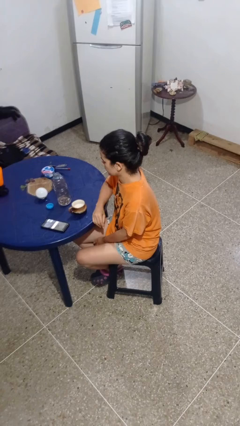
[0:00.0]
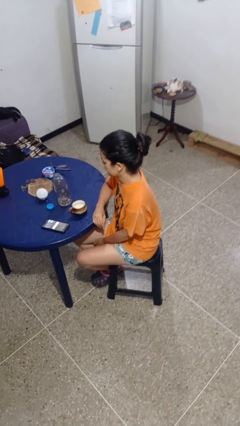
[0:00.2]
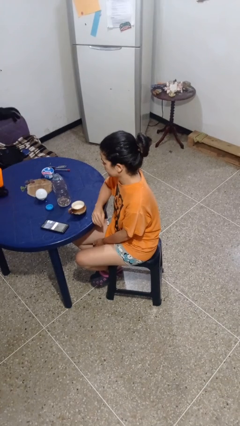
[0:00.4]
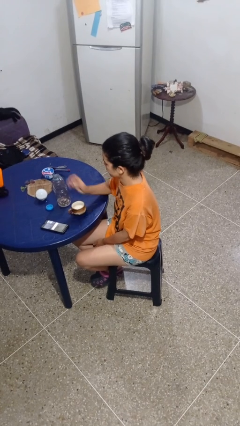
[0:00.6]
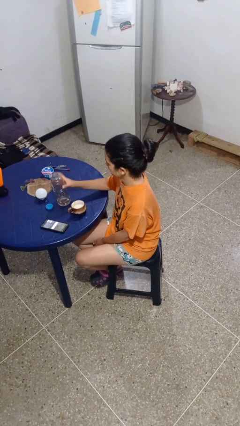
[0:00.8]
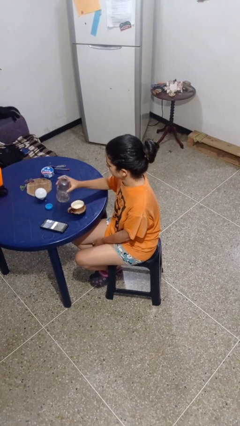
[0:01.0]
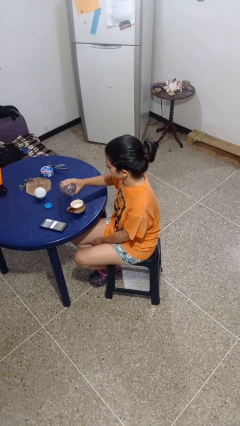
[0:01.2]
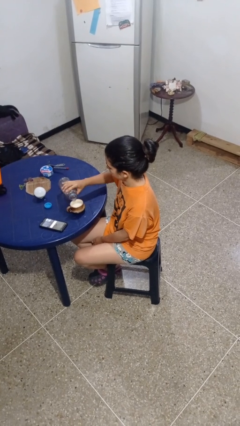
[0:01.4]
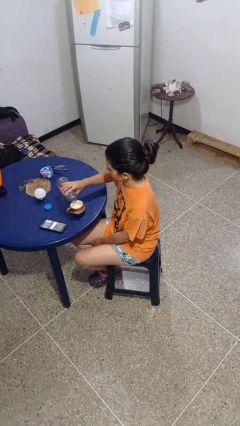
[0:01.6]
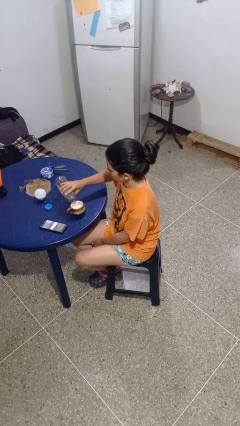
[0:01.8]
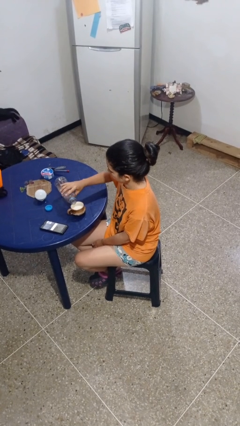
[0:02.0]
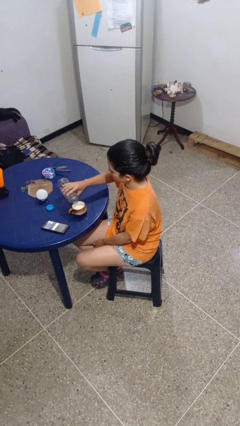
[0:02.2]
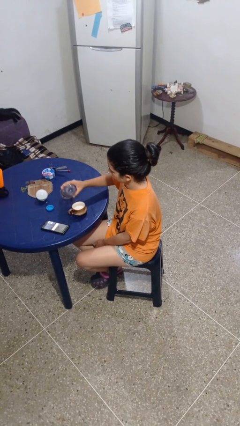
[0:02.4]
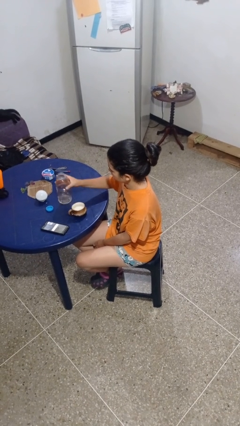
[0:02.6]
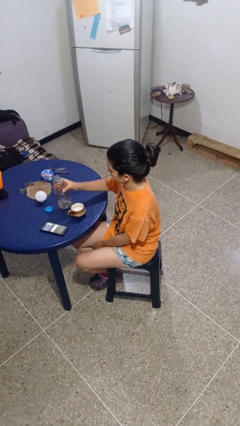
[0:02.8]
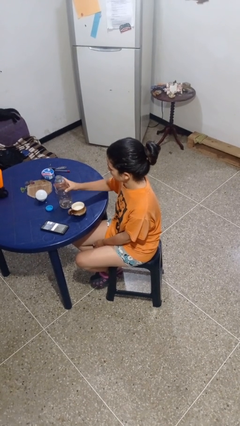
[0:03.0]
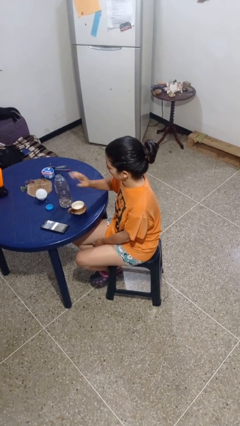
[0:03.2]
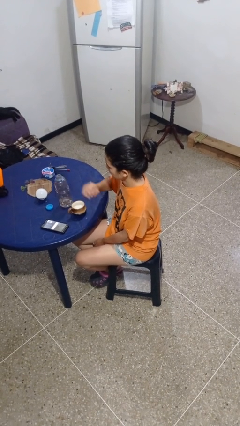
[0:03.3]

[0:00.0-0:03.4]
person pours liquid into cup

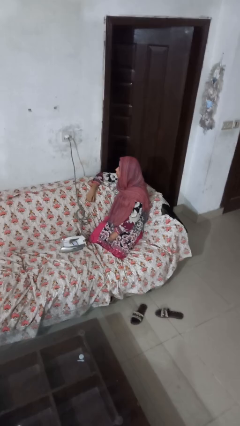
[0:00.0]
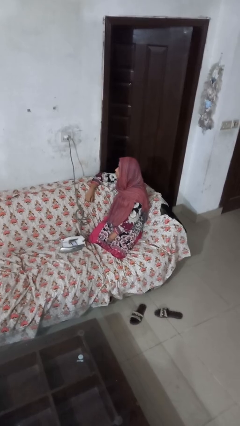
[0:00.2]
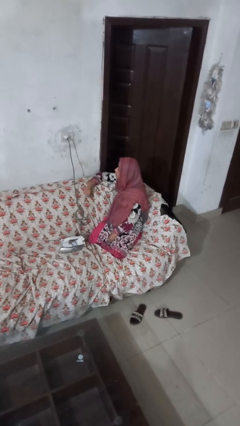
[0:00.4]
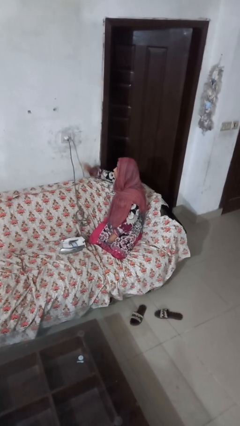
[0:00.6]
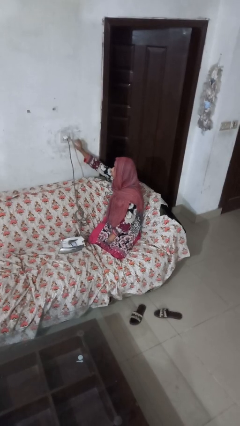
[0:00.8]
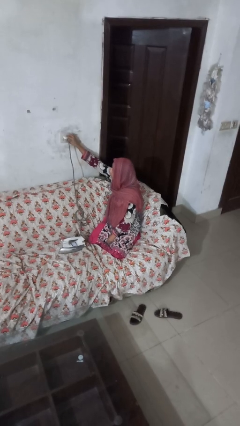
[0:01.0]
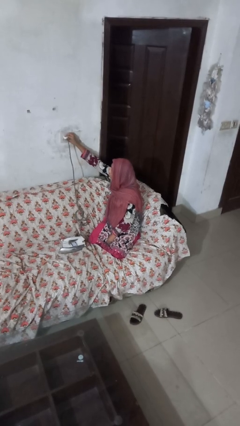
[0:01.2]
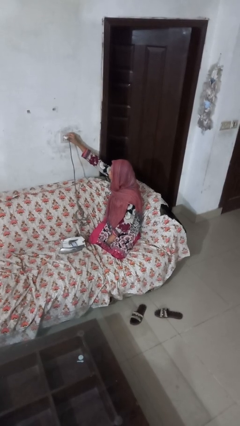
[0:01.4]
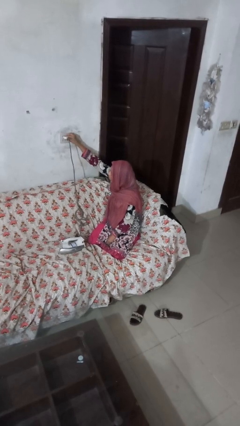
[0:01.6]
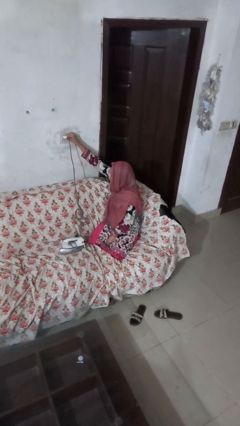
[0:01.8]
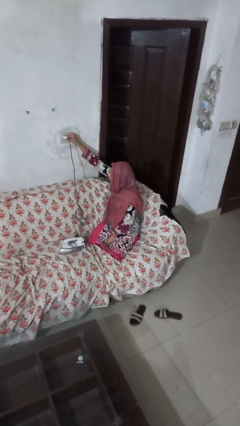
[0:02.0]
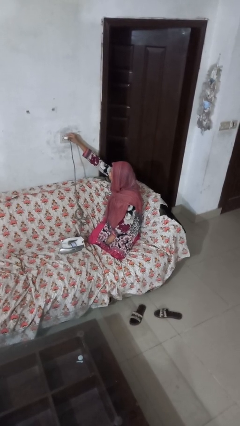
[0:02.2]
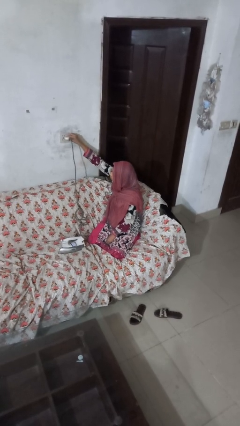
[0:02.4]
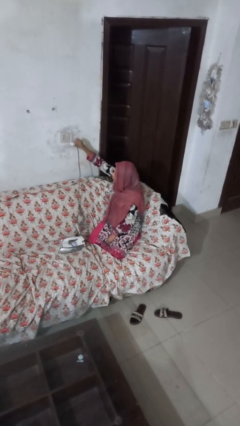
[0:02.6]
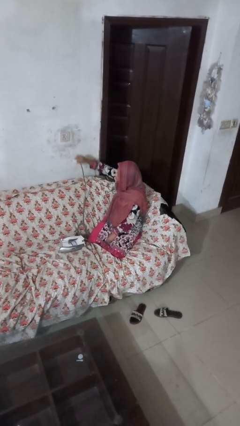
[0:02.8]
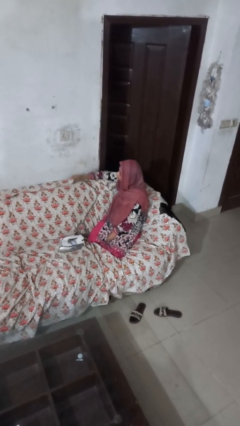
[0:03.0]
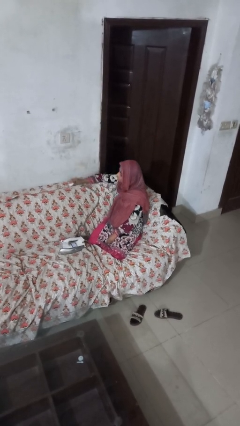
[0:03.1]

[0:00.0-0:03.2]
person unplugs from electrical socket

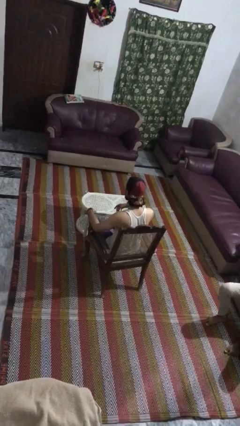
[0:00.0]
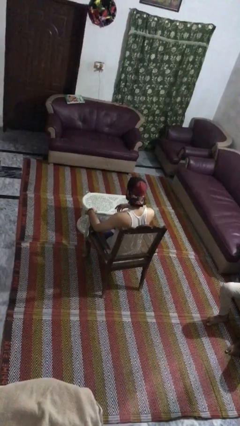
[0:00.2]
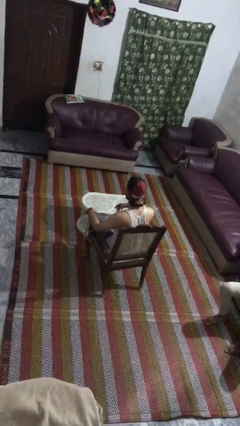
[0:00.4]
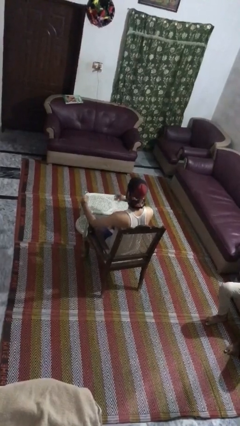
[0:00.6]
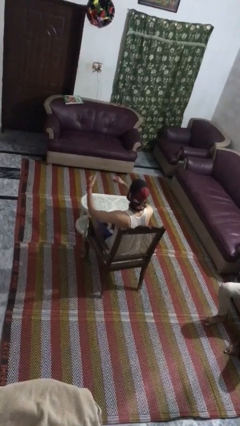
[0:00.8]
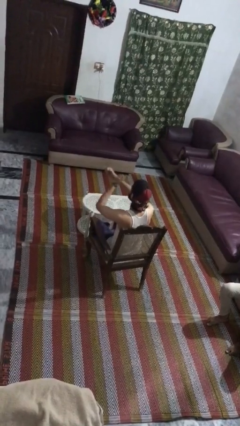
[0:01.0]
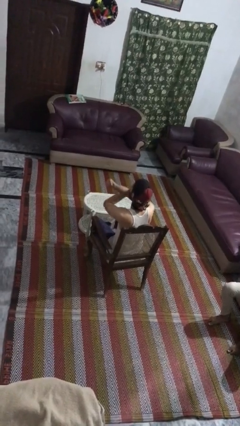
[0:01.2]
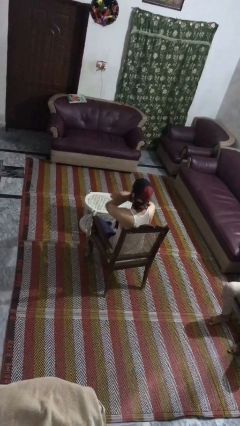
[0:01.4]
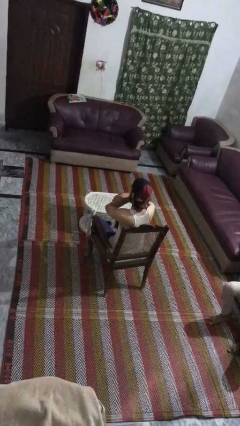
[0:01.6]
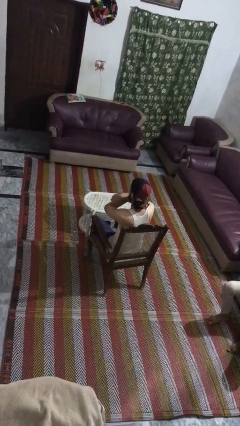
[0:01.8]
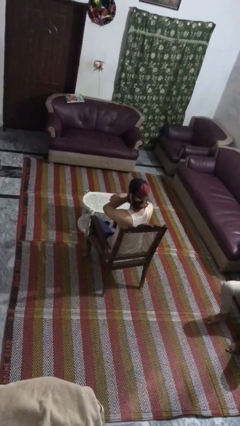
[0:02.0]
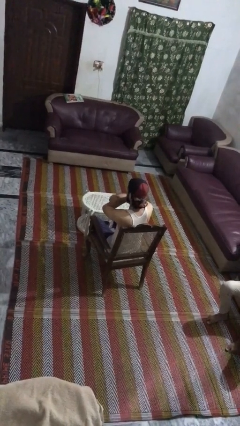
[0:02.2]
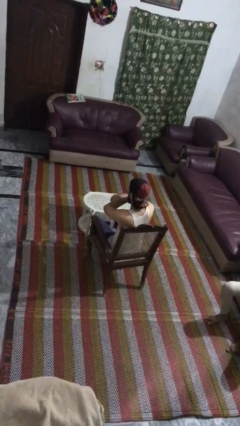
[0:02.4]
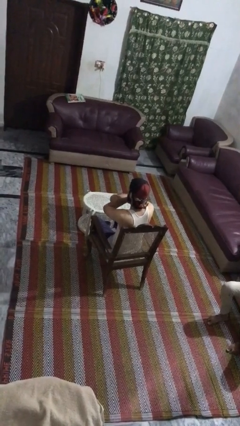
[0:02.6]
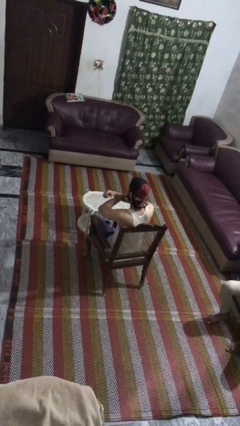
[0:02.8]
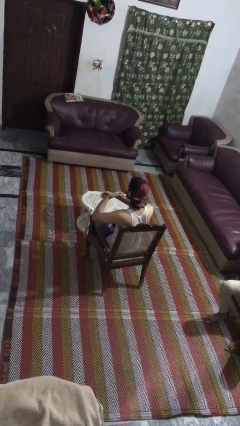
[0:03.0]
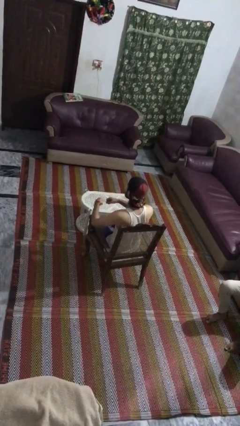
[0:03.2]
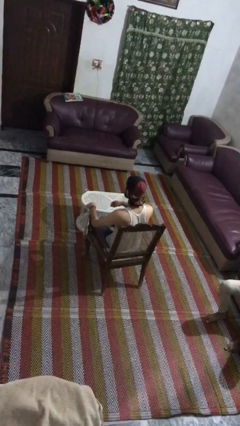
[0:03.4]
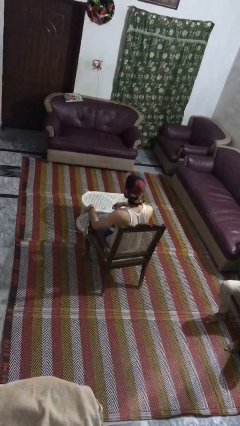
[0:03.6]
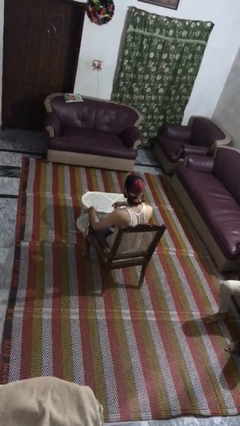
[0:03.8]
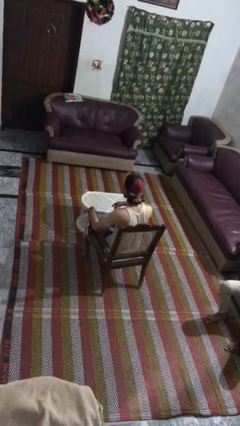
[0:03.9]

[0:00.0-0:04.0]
person gestures arms x

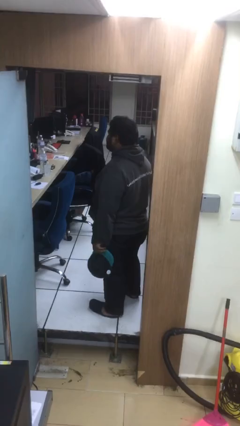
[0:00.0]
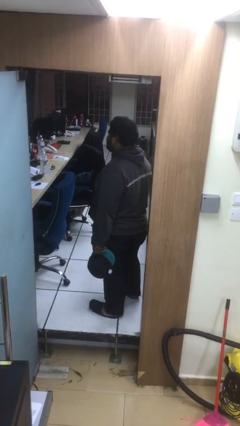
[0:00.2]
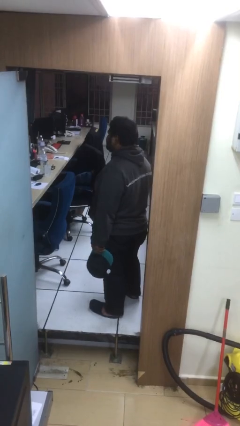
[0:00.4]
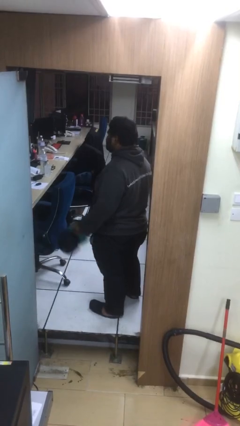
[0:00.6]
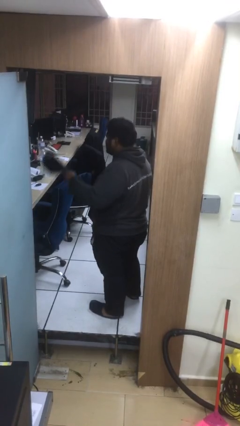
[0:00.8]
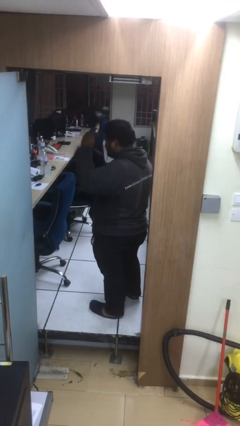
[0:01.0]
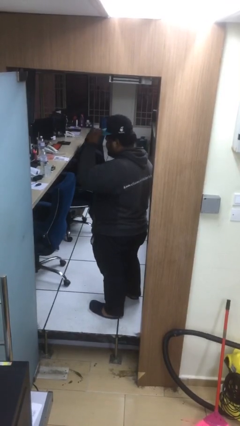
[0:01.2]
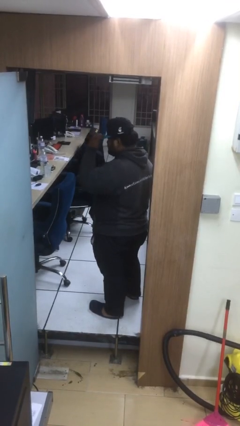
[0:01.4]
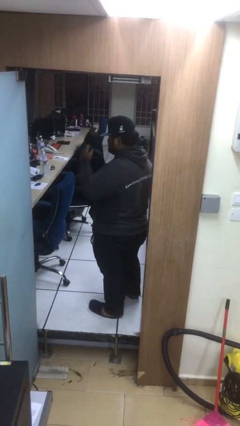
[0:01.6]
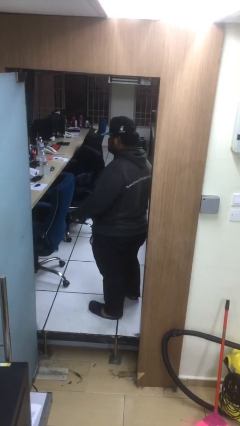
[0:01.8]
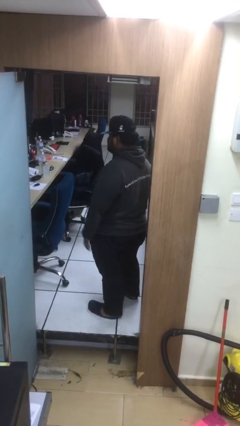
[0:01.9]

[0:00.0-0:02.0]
person puts on hat

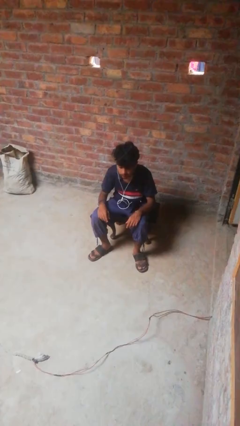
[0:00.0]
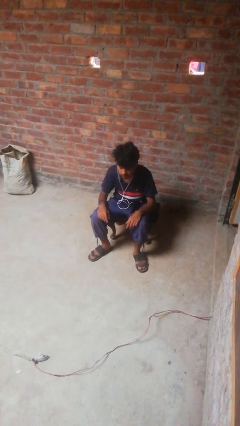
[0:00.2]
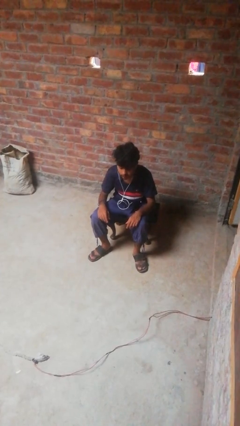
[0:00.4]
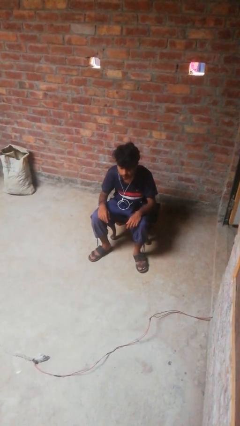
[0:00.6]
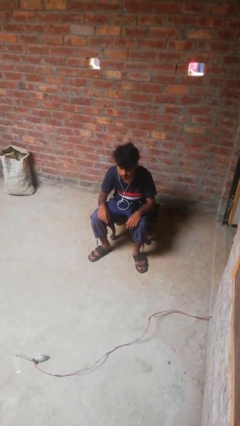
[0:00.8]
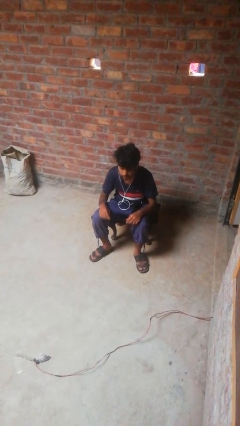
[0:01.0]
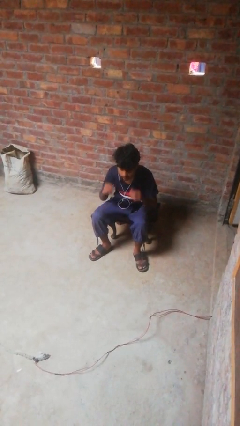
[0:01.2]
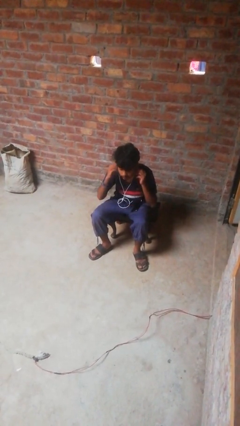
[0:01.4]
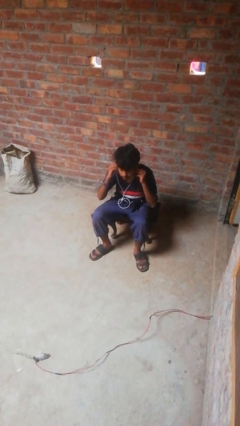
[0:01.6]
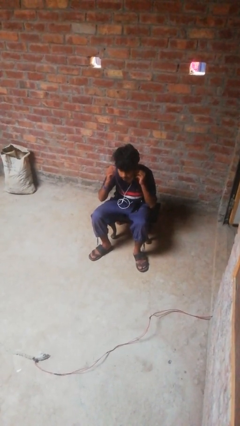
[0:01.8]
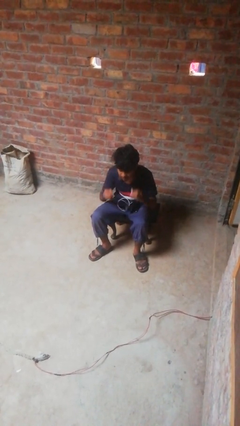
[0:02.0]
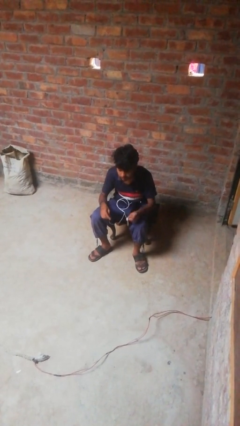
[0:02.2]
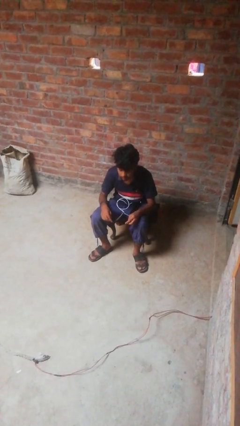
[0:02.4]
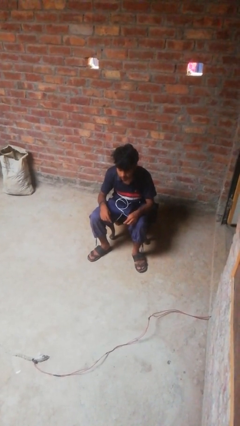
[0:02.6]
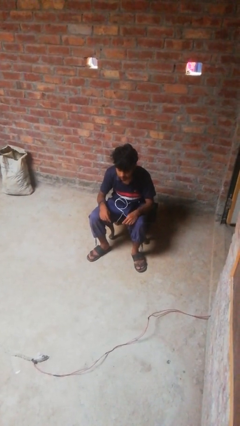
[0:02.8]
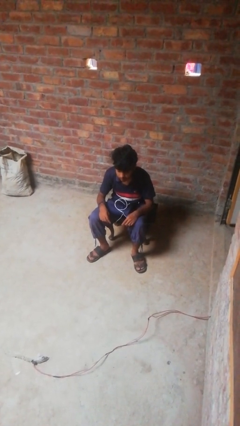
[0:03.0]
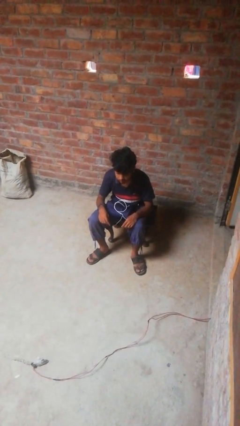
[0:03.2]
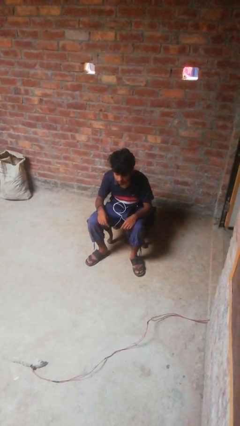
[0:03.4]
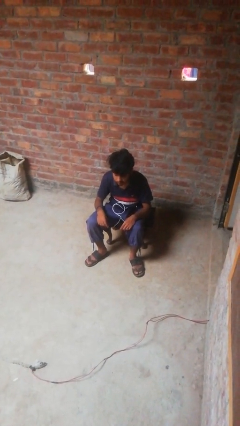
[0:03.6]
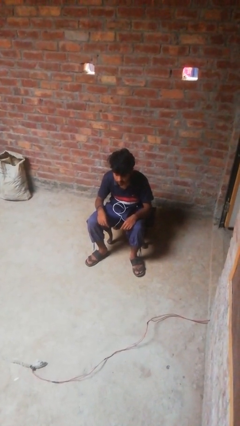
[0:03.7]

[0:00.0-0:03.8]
person takes off headphones

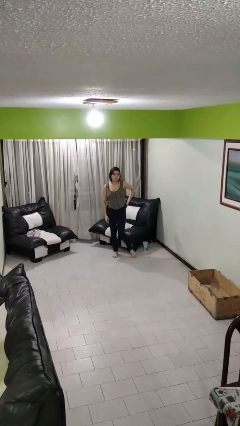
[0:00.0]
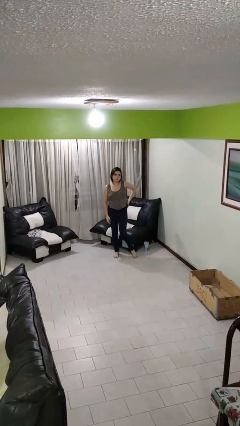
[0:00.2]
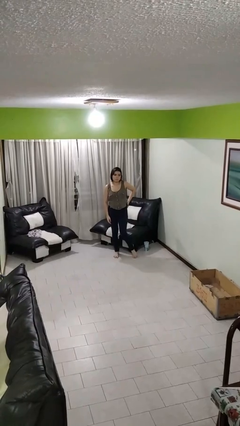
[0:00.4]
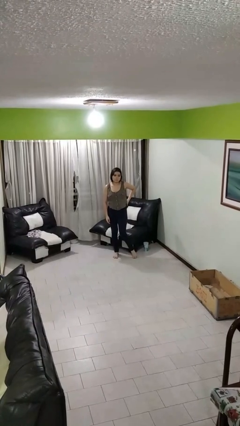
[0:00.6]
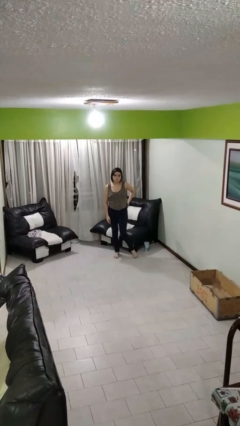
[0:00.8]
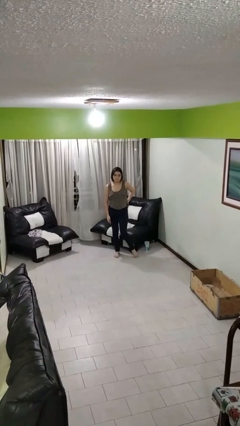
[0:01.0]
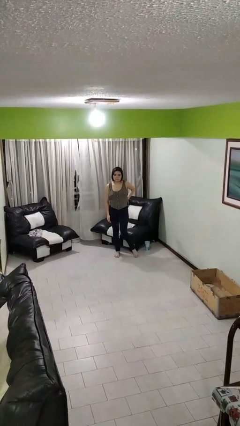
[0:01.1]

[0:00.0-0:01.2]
person puts phone into pocket
